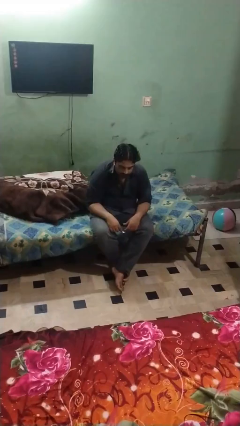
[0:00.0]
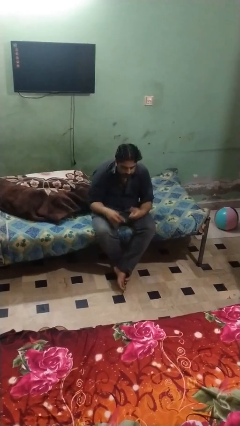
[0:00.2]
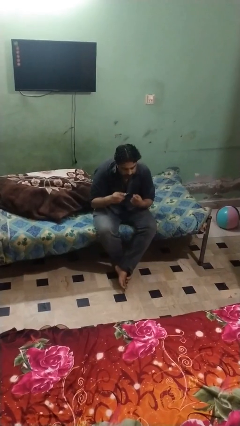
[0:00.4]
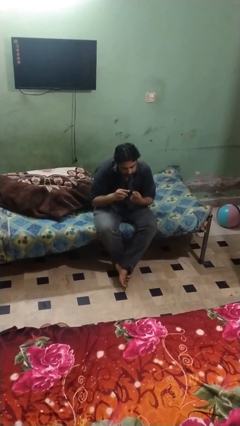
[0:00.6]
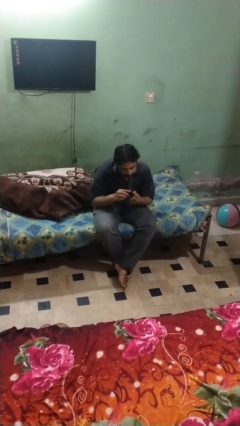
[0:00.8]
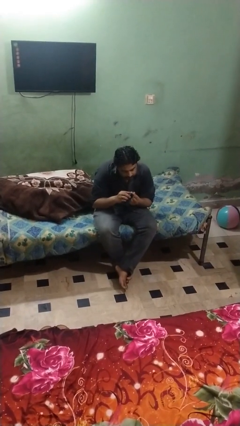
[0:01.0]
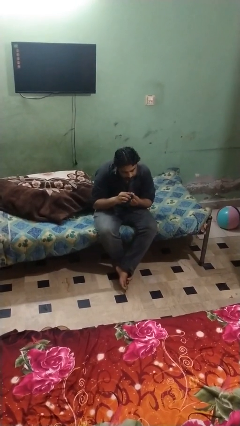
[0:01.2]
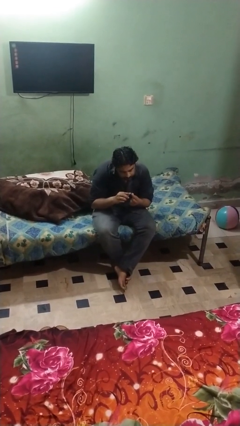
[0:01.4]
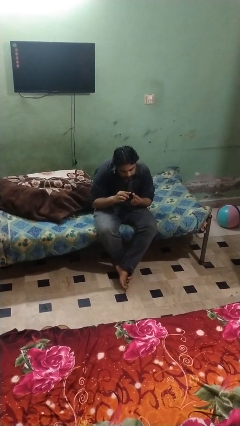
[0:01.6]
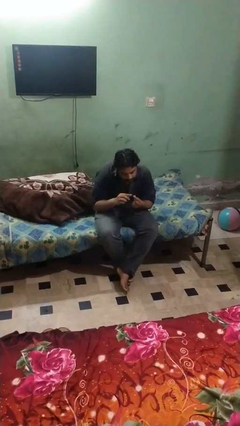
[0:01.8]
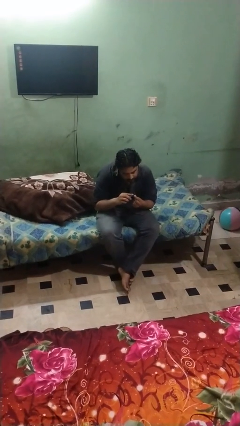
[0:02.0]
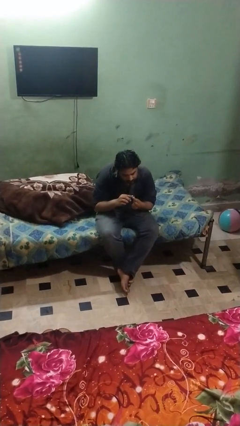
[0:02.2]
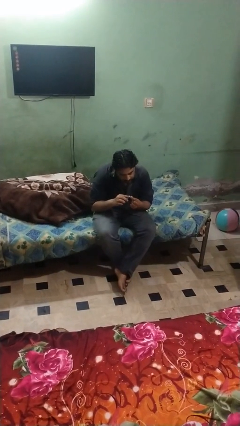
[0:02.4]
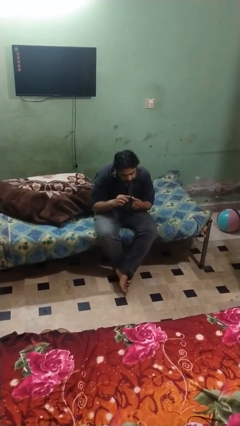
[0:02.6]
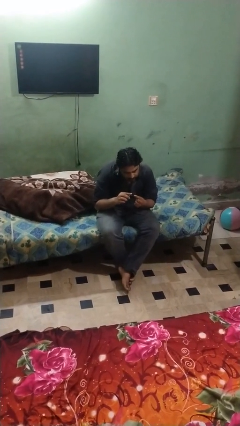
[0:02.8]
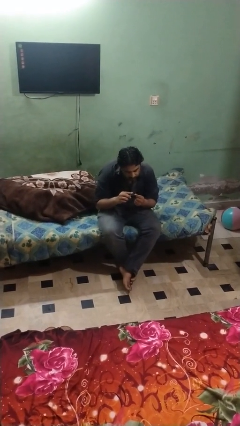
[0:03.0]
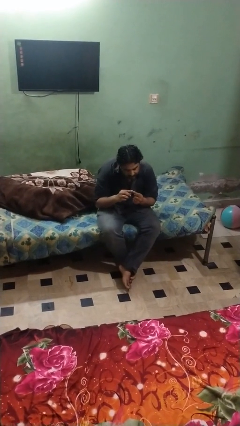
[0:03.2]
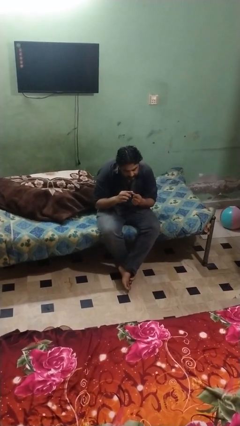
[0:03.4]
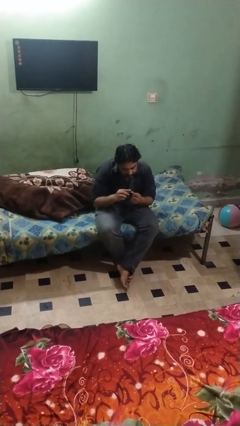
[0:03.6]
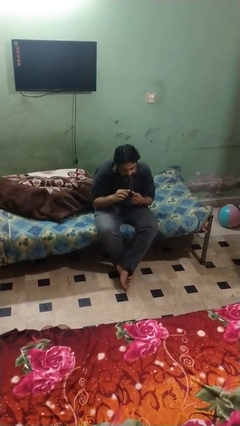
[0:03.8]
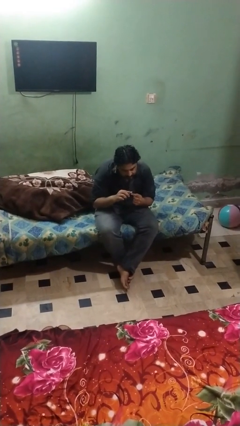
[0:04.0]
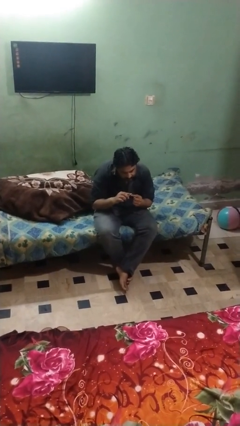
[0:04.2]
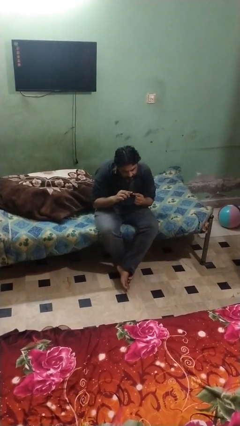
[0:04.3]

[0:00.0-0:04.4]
person files fingernails

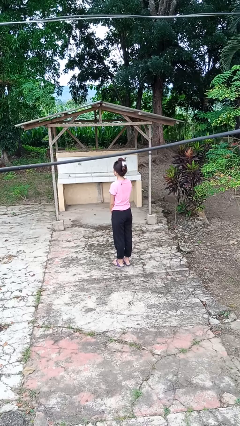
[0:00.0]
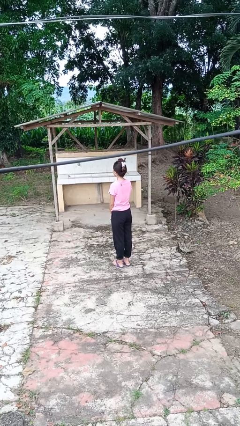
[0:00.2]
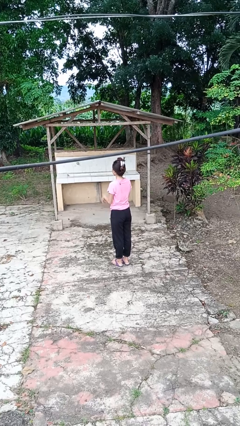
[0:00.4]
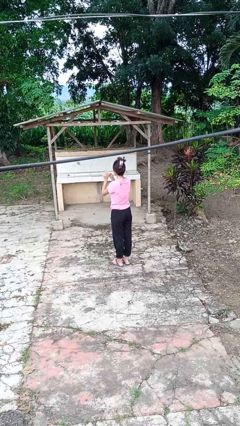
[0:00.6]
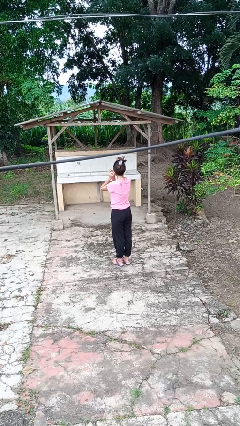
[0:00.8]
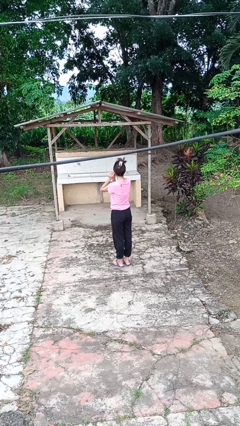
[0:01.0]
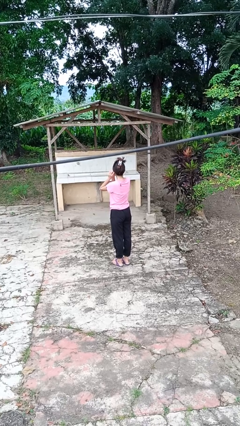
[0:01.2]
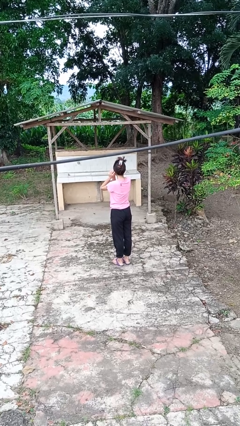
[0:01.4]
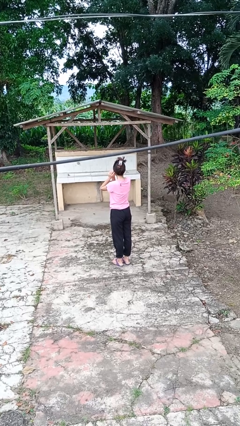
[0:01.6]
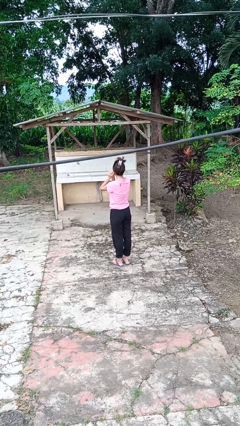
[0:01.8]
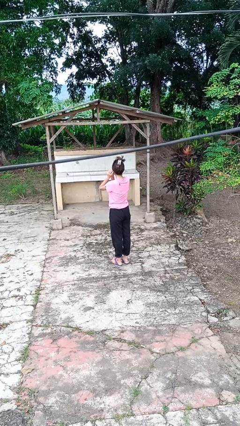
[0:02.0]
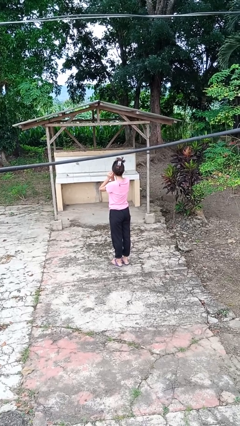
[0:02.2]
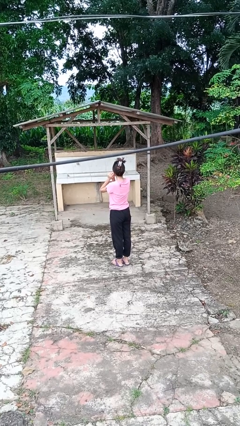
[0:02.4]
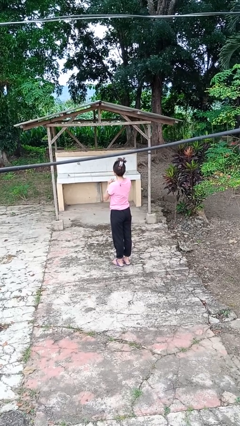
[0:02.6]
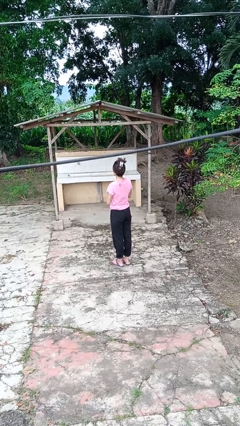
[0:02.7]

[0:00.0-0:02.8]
person puts on earrings

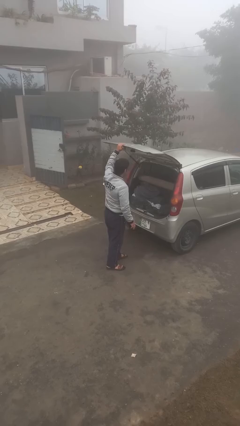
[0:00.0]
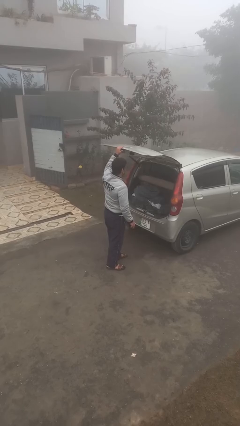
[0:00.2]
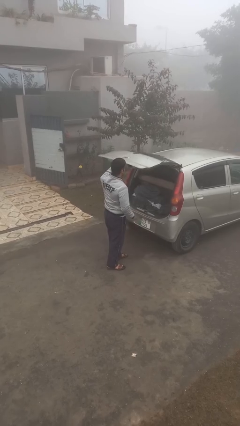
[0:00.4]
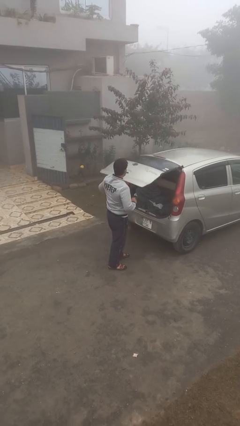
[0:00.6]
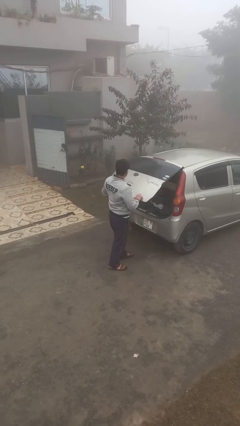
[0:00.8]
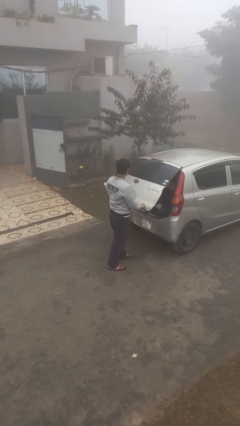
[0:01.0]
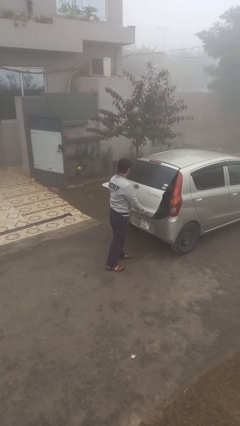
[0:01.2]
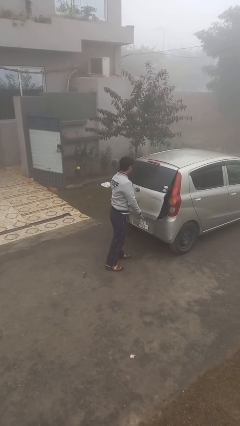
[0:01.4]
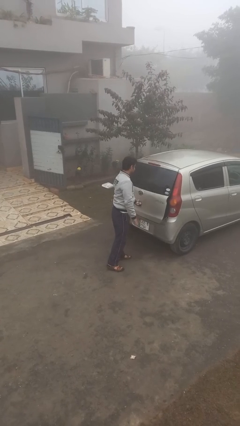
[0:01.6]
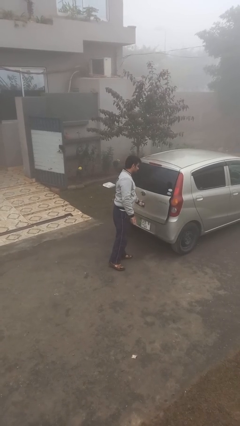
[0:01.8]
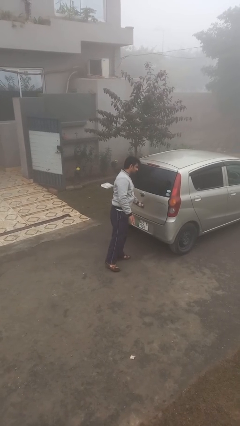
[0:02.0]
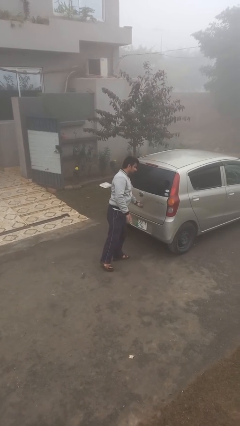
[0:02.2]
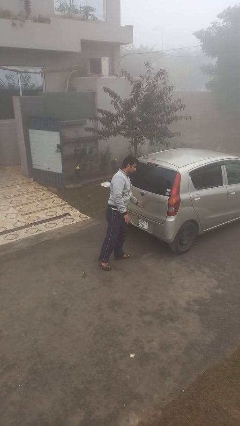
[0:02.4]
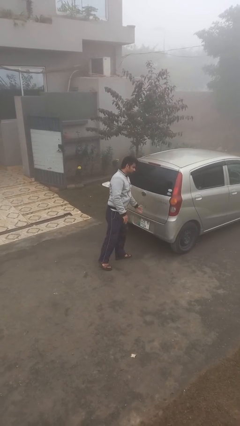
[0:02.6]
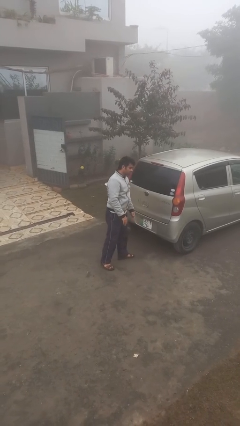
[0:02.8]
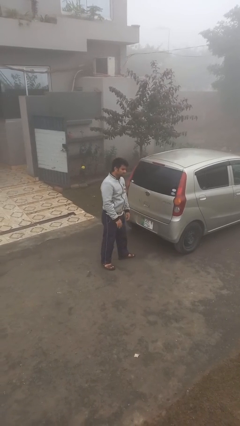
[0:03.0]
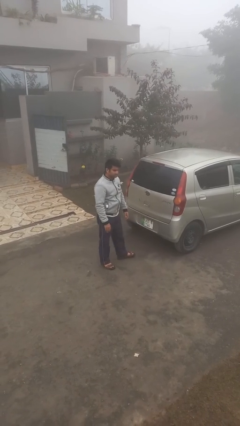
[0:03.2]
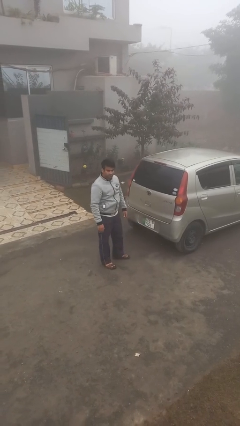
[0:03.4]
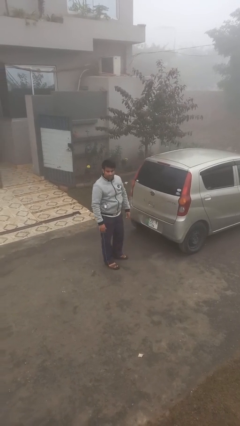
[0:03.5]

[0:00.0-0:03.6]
person closes car trunk

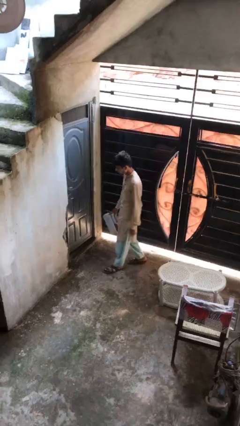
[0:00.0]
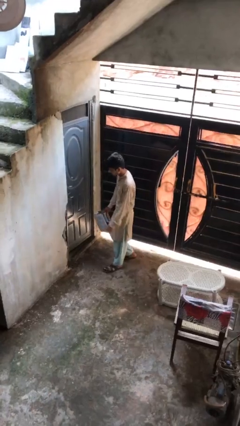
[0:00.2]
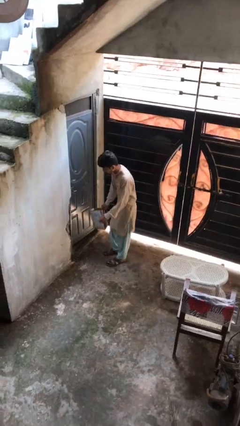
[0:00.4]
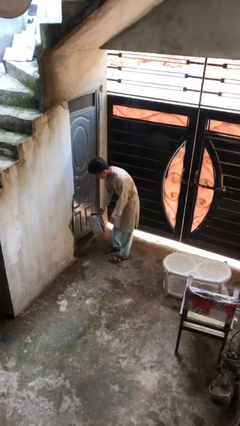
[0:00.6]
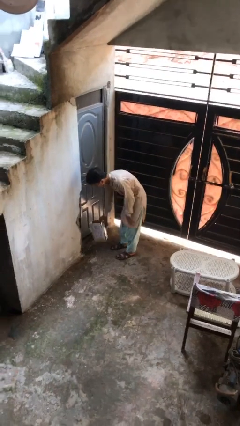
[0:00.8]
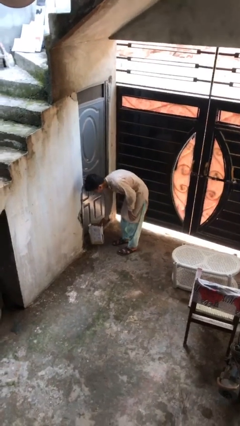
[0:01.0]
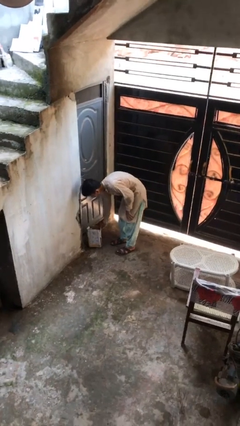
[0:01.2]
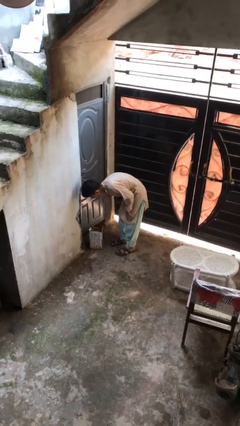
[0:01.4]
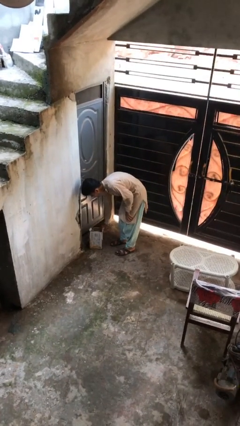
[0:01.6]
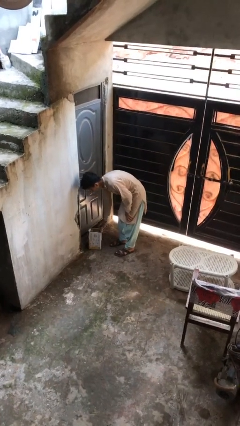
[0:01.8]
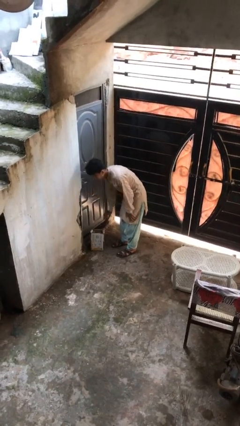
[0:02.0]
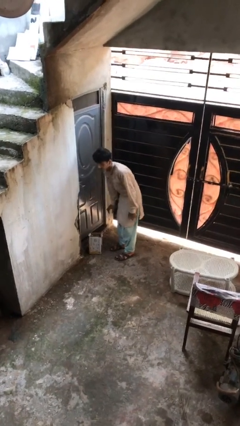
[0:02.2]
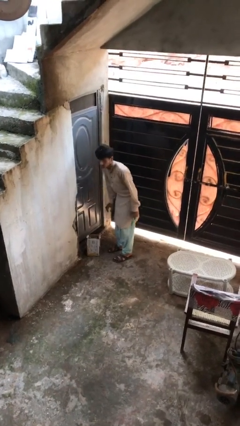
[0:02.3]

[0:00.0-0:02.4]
person puts down object on floor

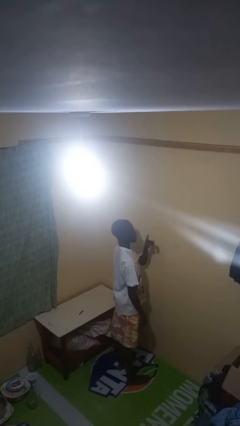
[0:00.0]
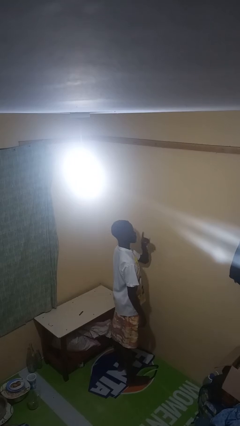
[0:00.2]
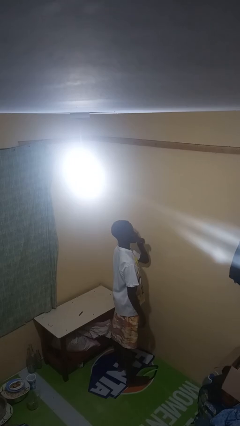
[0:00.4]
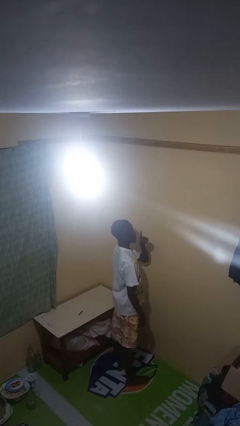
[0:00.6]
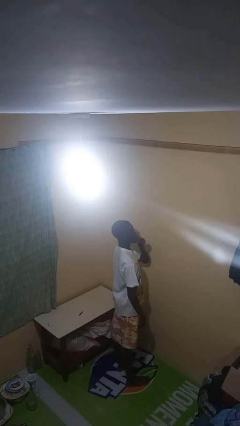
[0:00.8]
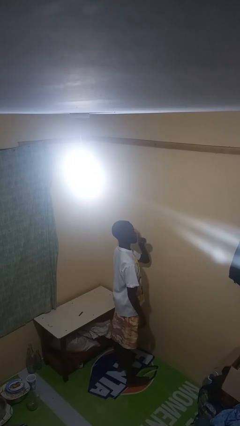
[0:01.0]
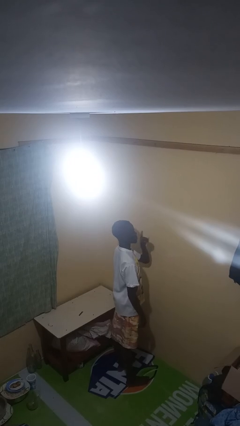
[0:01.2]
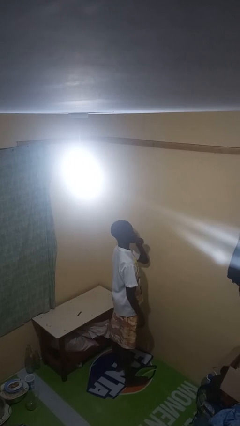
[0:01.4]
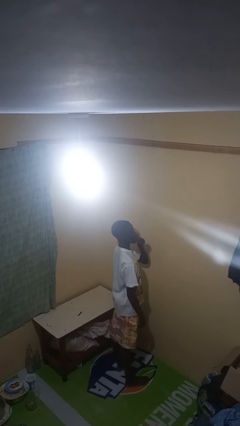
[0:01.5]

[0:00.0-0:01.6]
person gestures be quiet

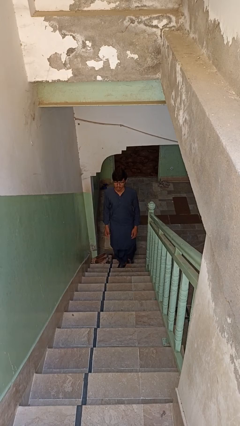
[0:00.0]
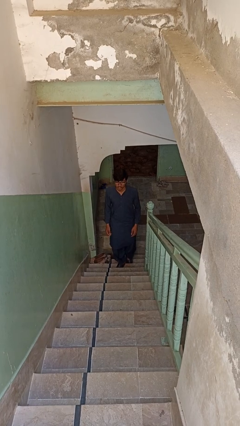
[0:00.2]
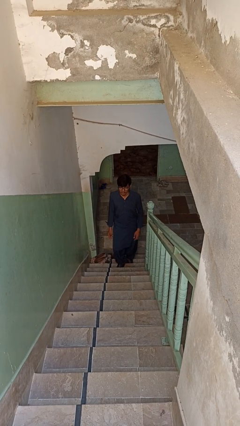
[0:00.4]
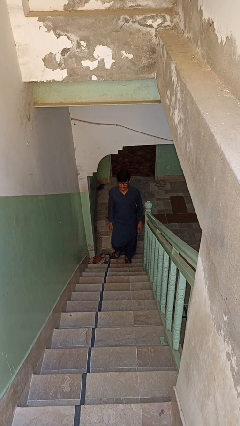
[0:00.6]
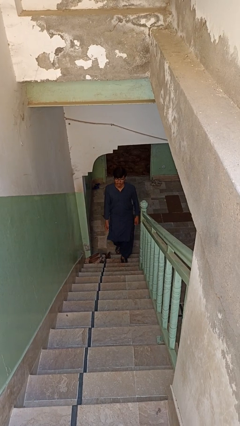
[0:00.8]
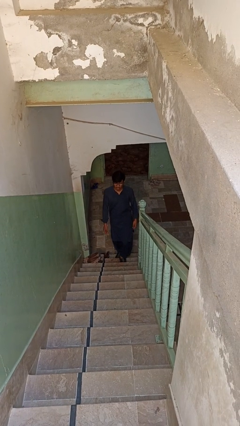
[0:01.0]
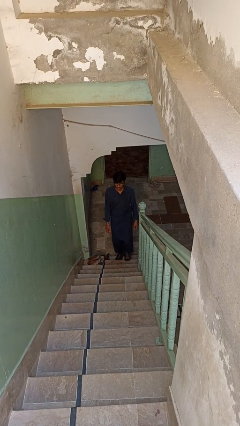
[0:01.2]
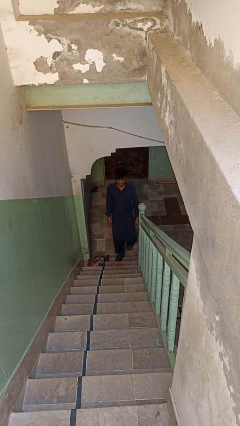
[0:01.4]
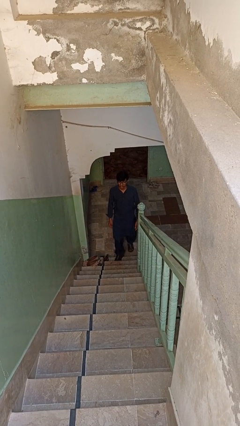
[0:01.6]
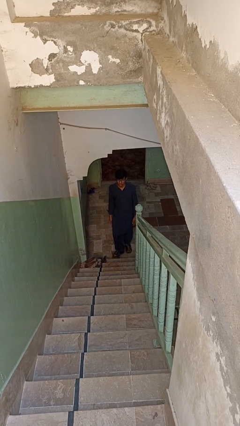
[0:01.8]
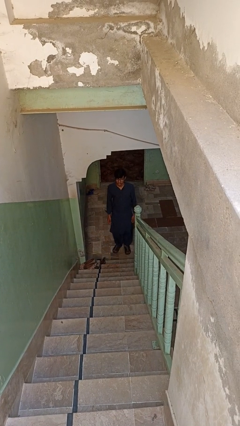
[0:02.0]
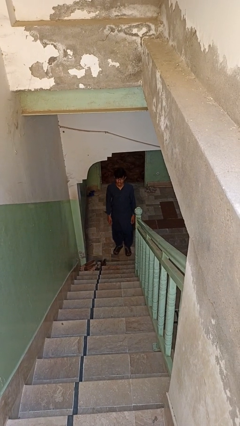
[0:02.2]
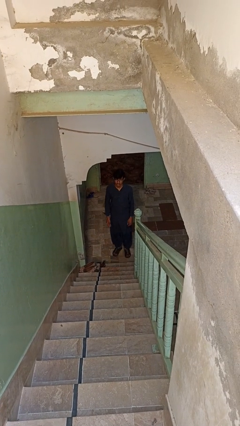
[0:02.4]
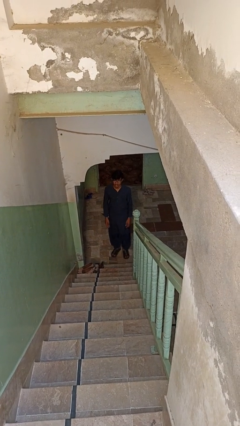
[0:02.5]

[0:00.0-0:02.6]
person climbs down stairs
